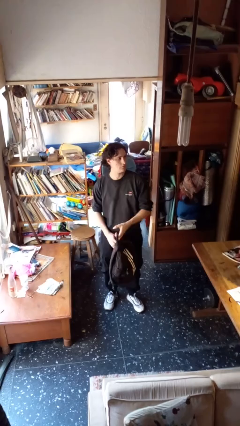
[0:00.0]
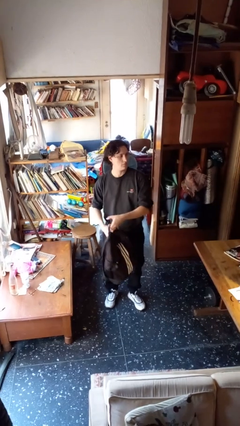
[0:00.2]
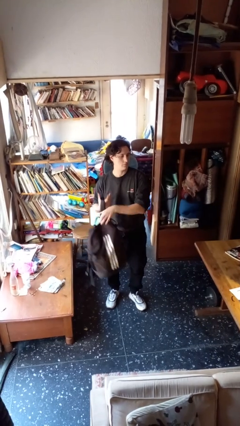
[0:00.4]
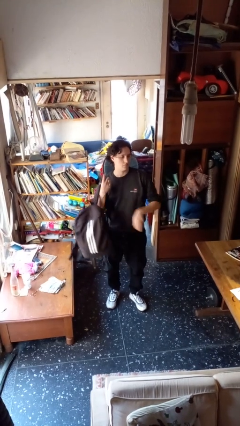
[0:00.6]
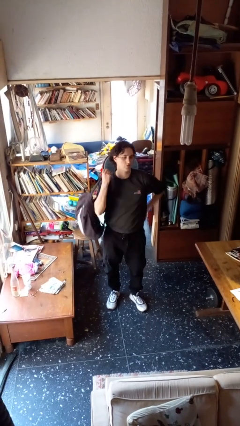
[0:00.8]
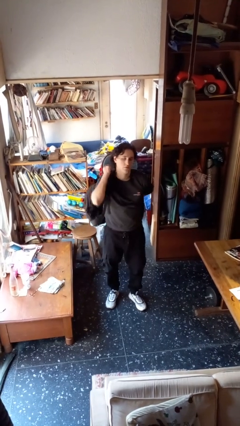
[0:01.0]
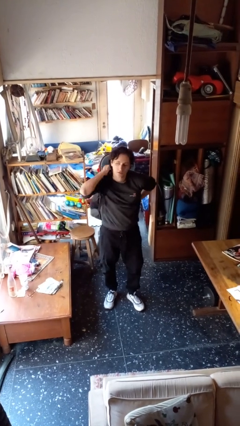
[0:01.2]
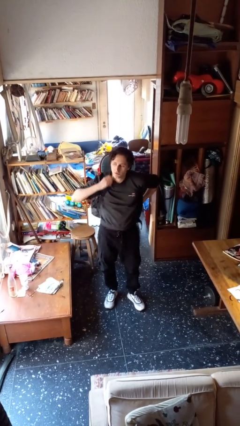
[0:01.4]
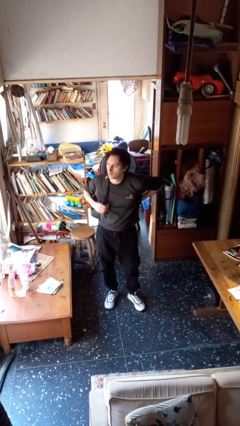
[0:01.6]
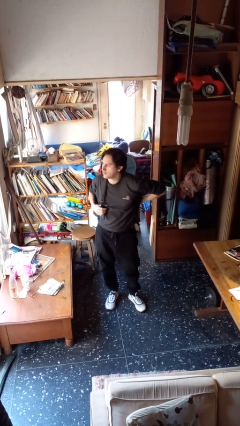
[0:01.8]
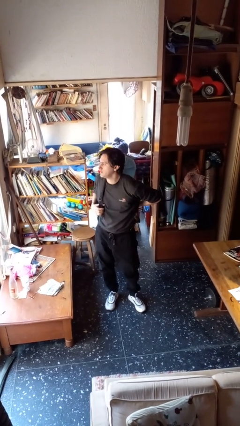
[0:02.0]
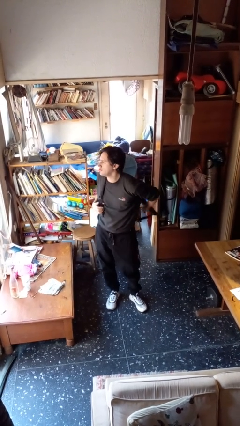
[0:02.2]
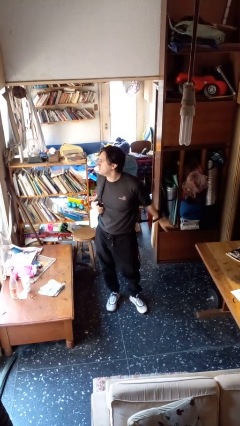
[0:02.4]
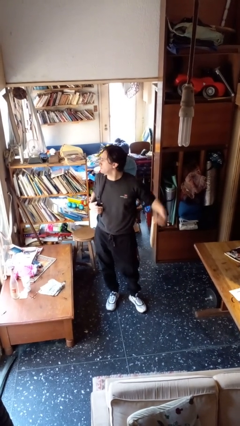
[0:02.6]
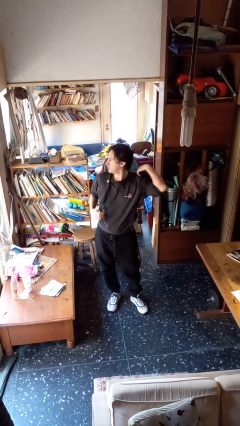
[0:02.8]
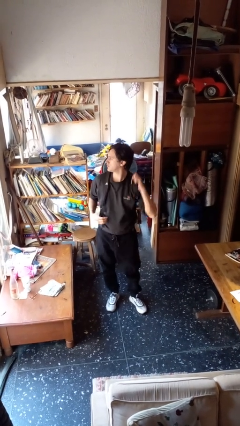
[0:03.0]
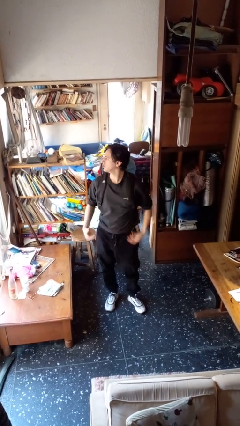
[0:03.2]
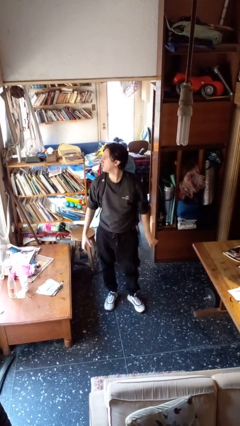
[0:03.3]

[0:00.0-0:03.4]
person puts on backpack

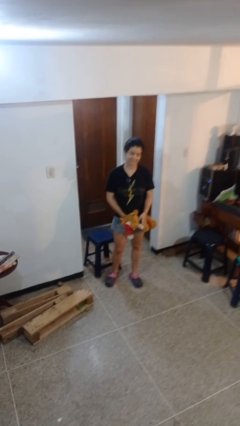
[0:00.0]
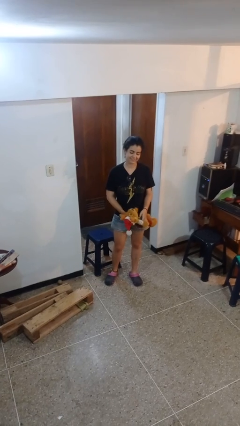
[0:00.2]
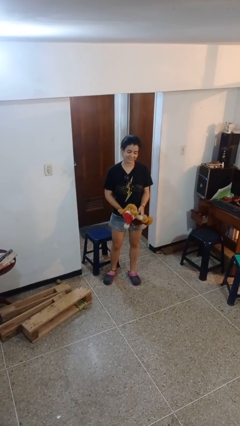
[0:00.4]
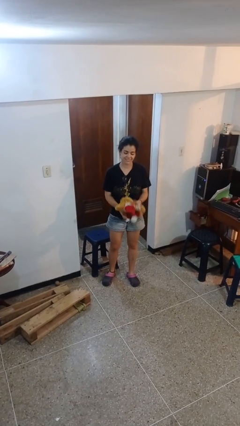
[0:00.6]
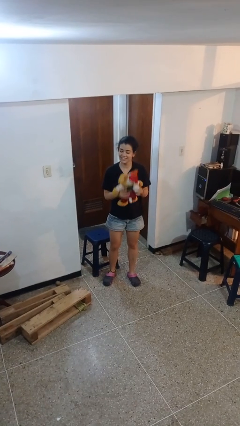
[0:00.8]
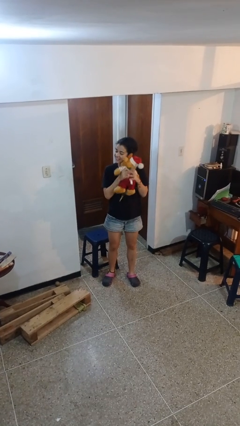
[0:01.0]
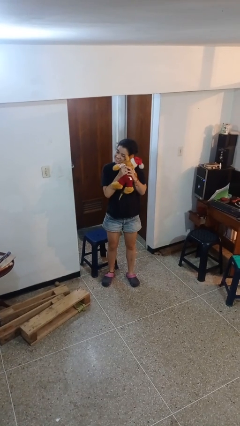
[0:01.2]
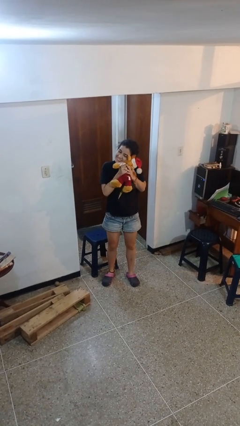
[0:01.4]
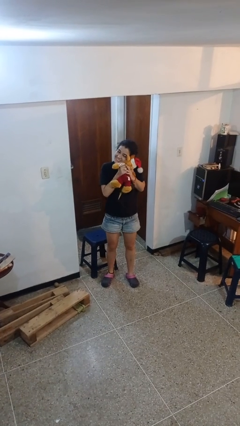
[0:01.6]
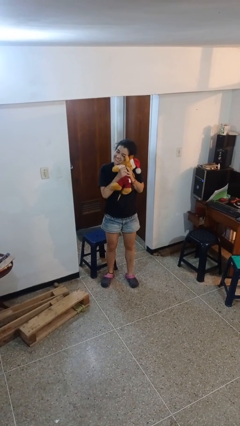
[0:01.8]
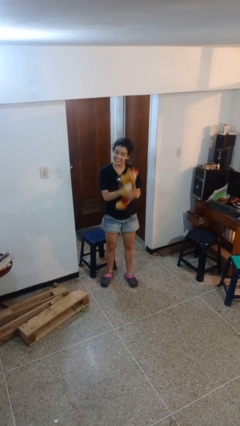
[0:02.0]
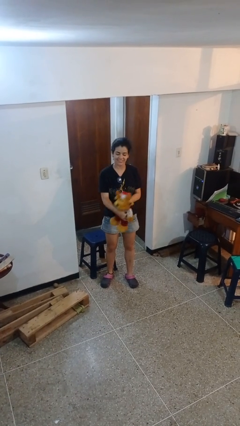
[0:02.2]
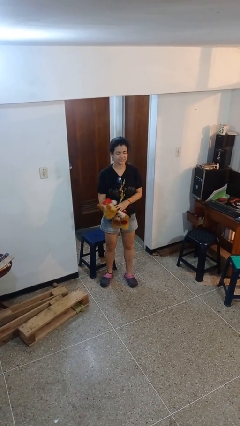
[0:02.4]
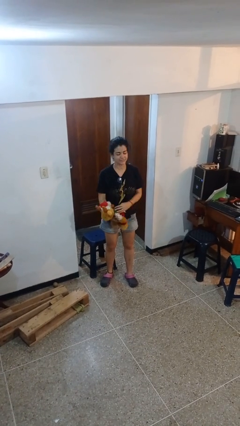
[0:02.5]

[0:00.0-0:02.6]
person hugs stuffed animal

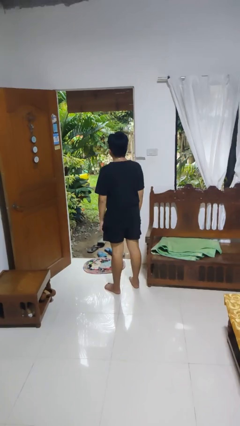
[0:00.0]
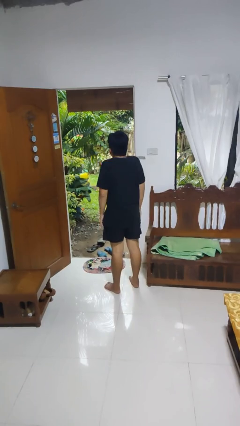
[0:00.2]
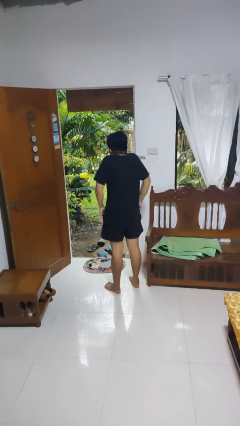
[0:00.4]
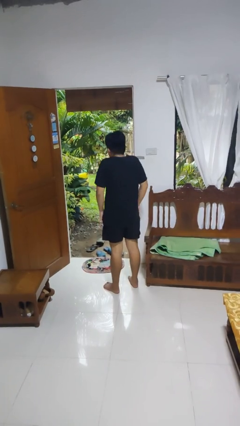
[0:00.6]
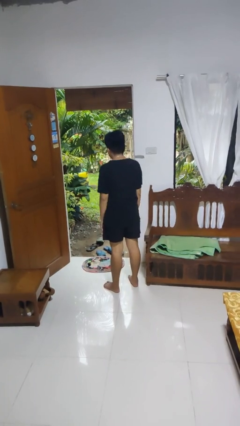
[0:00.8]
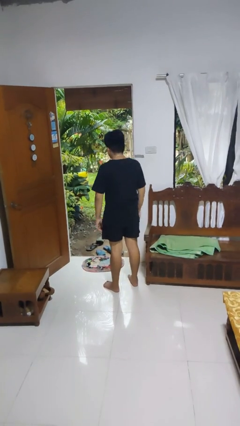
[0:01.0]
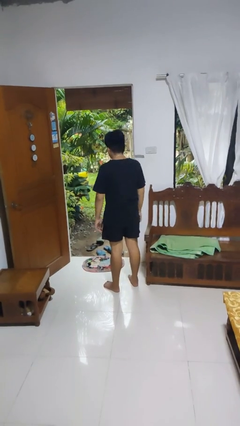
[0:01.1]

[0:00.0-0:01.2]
person shrugs

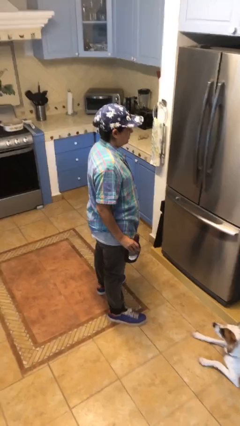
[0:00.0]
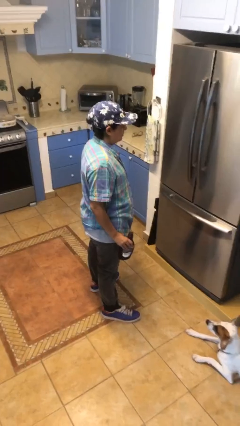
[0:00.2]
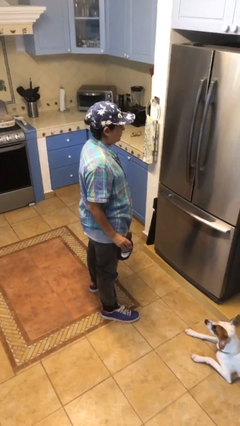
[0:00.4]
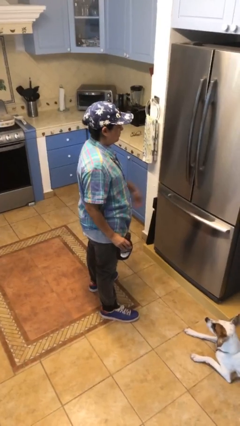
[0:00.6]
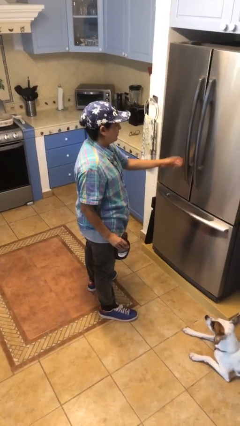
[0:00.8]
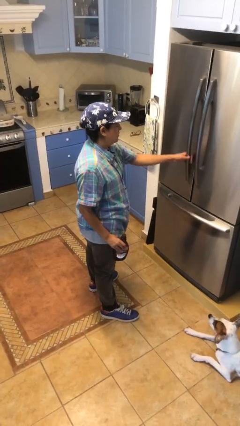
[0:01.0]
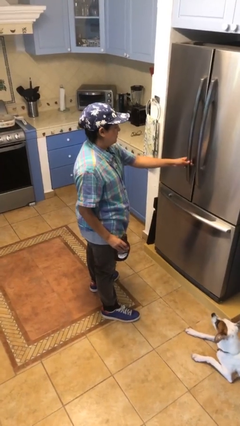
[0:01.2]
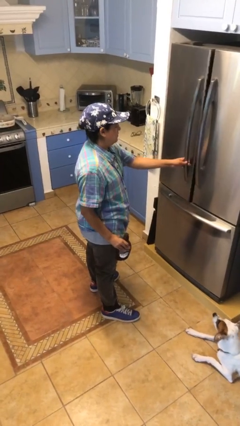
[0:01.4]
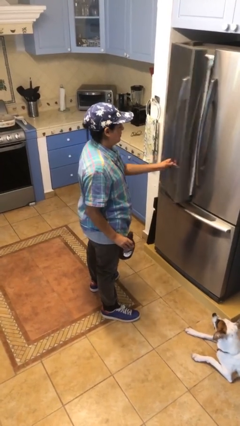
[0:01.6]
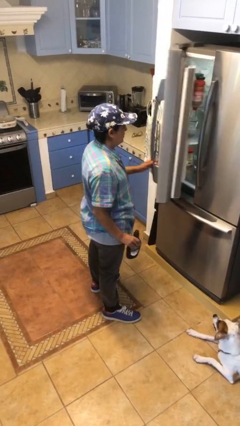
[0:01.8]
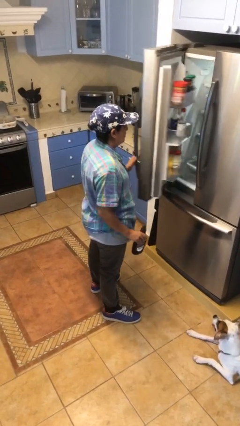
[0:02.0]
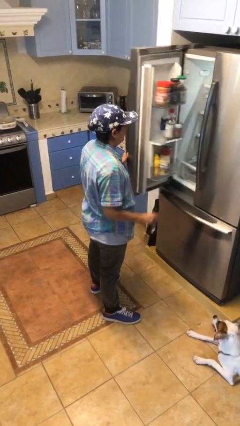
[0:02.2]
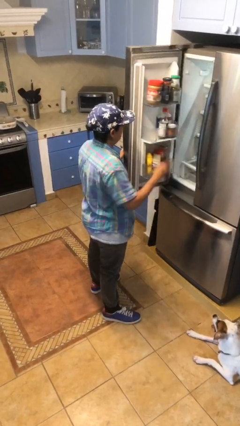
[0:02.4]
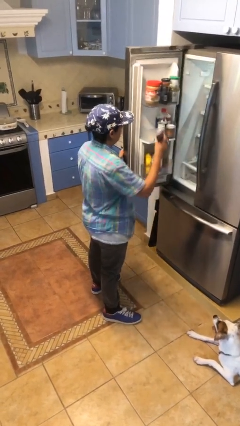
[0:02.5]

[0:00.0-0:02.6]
person opens refrigerator

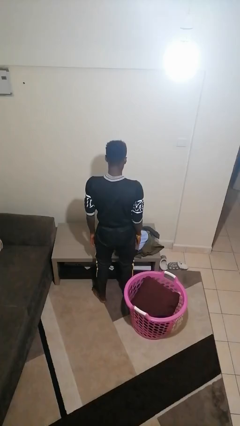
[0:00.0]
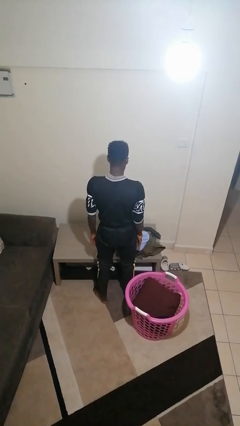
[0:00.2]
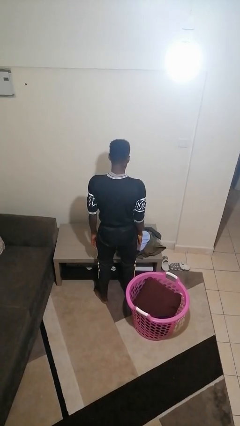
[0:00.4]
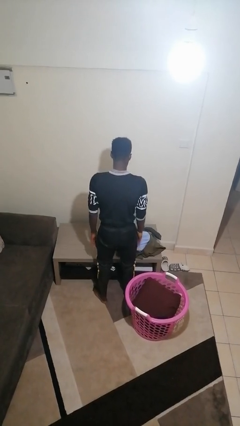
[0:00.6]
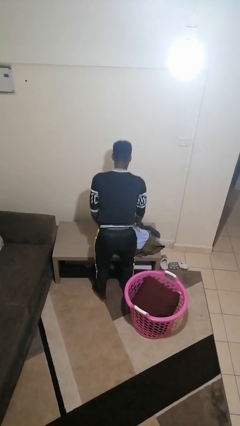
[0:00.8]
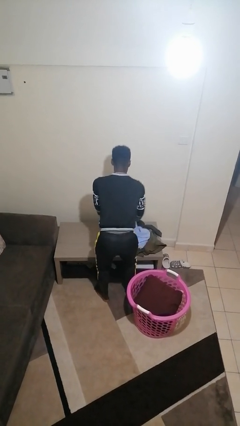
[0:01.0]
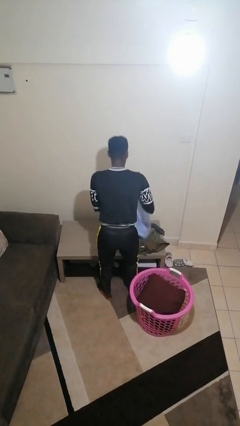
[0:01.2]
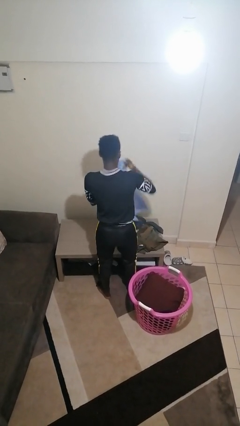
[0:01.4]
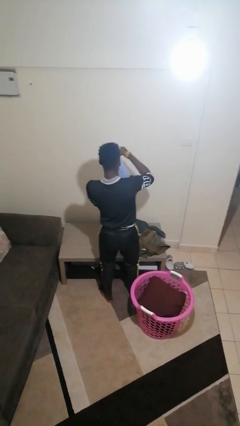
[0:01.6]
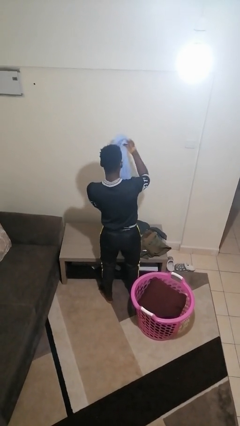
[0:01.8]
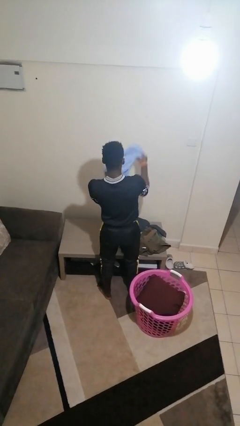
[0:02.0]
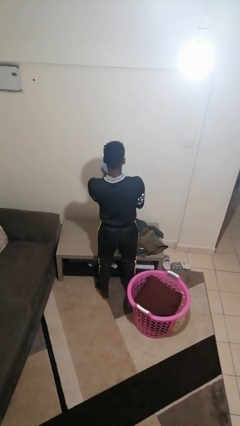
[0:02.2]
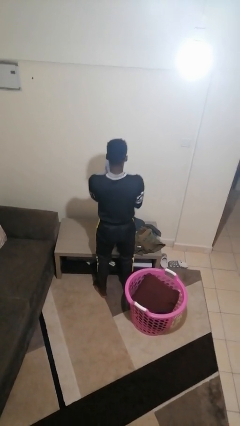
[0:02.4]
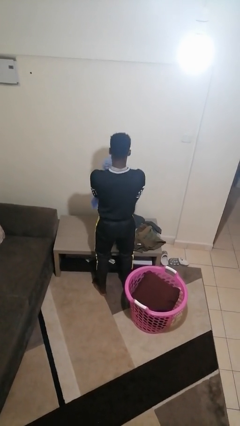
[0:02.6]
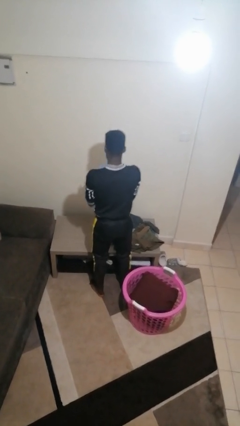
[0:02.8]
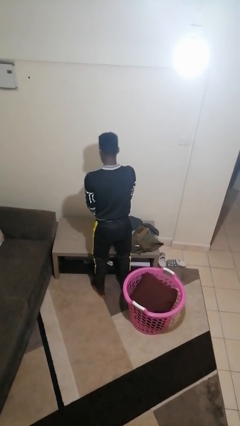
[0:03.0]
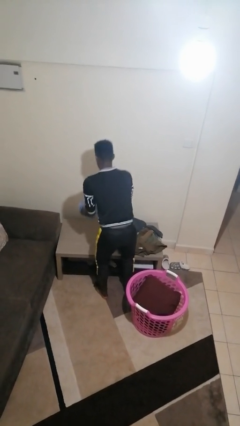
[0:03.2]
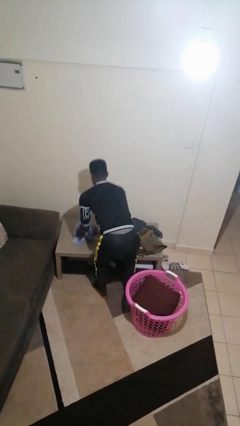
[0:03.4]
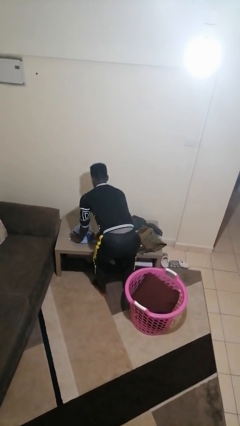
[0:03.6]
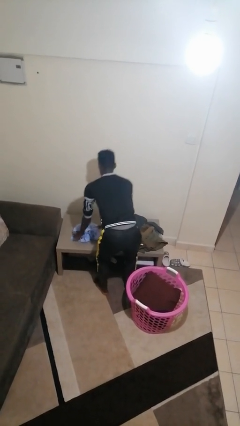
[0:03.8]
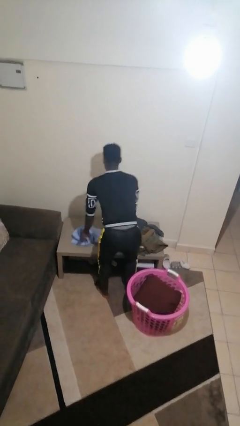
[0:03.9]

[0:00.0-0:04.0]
person folds shirt

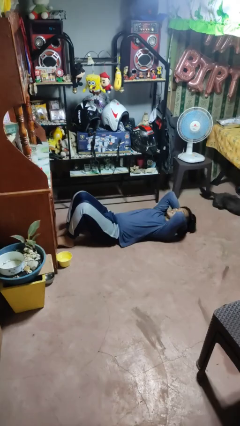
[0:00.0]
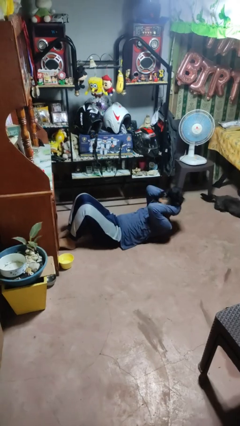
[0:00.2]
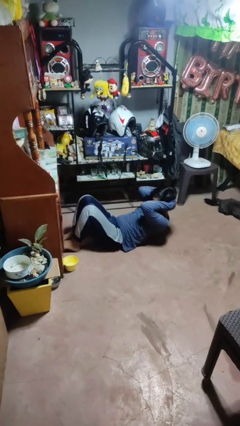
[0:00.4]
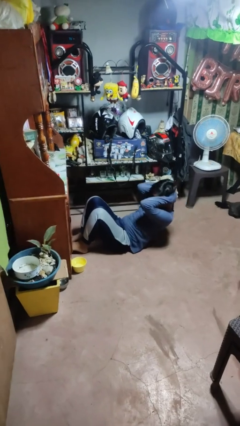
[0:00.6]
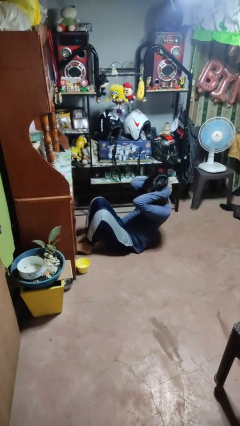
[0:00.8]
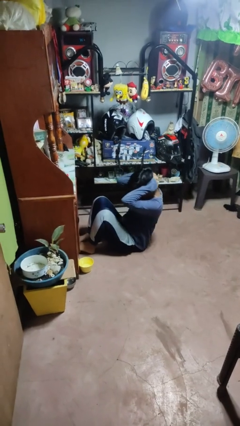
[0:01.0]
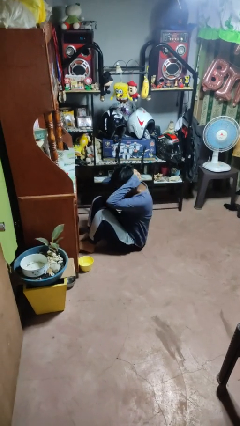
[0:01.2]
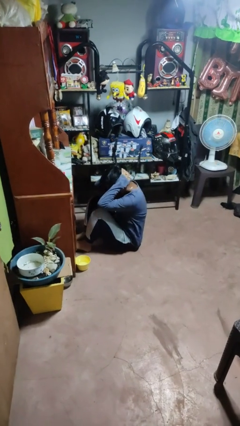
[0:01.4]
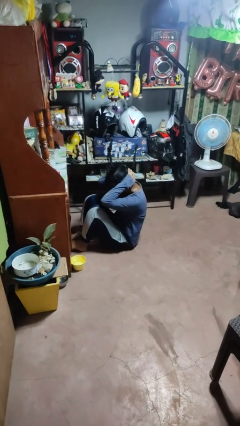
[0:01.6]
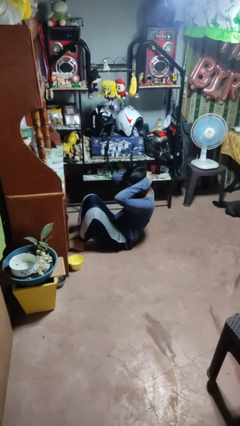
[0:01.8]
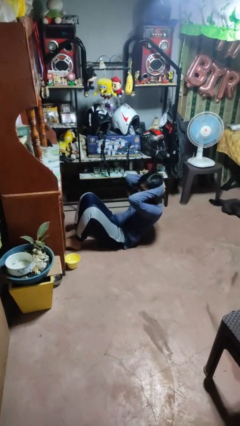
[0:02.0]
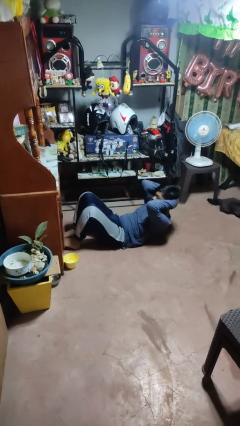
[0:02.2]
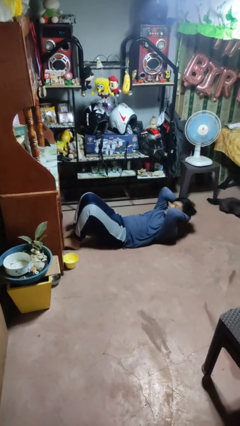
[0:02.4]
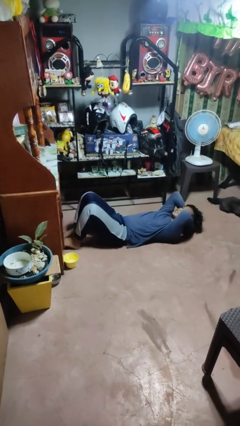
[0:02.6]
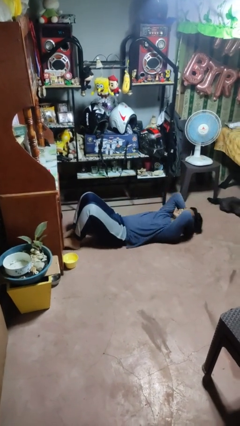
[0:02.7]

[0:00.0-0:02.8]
person exercises with situp

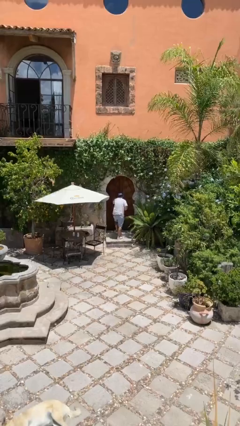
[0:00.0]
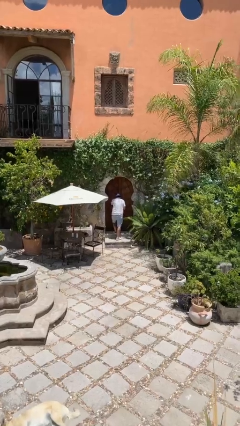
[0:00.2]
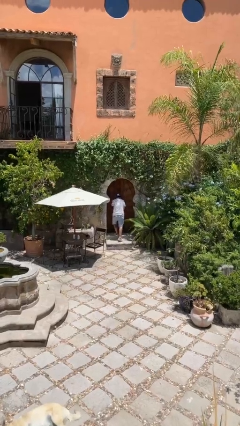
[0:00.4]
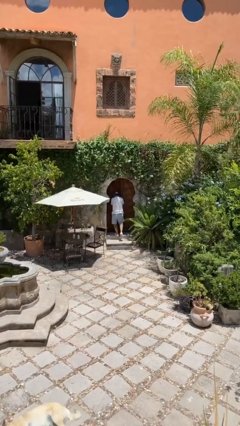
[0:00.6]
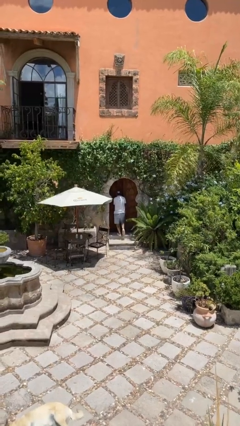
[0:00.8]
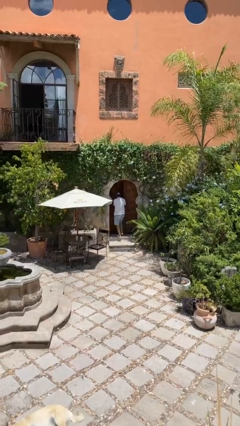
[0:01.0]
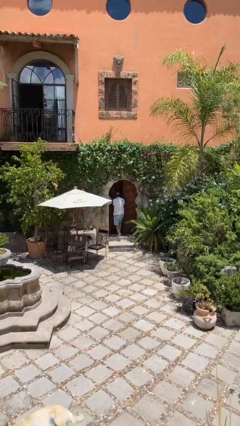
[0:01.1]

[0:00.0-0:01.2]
person opens facility door
